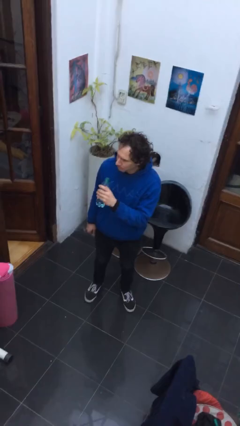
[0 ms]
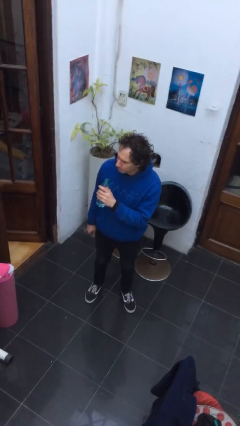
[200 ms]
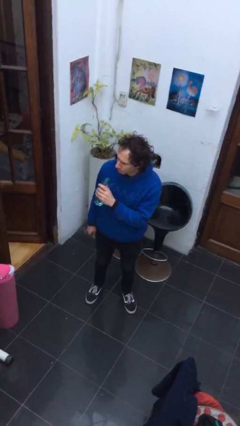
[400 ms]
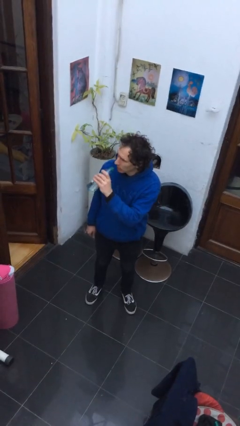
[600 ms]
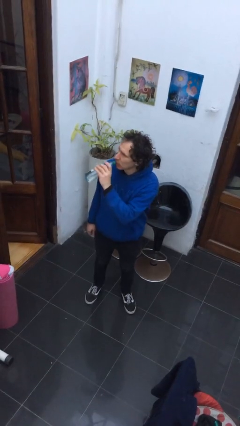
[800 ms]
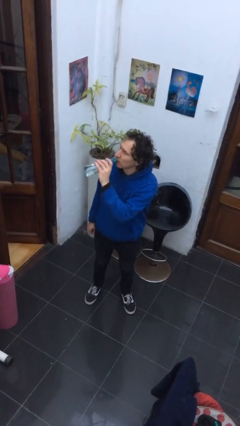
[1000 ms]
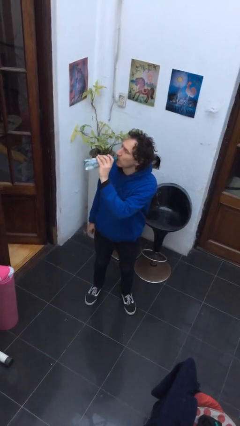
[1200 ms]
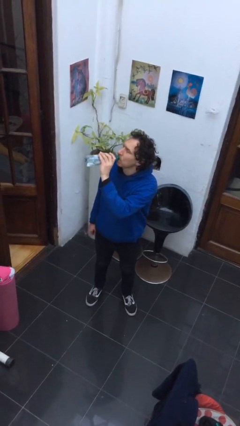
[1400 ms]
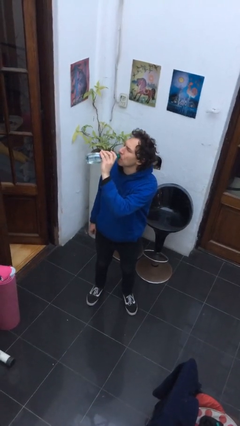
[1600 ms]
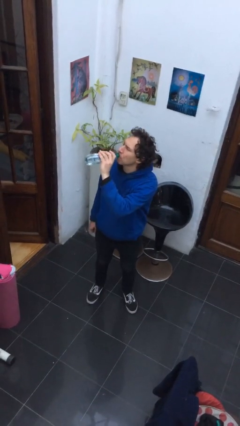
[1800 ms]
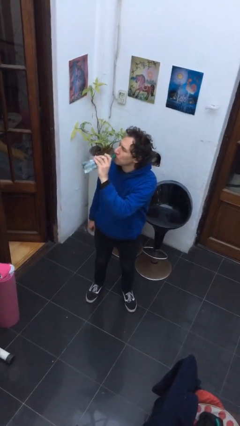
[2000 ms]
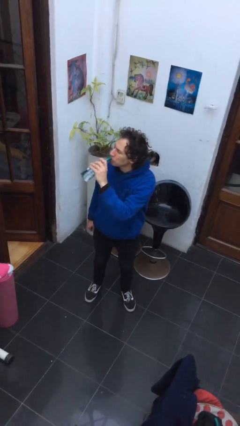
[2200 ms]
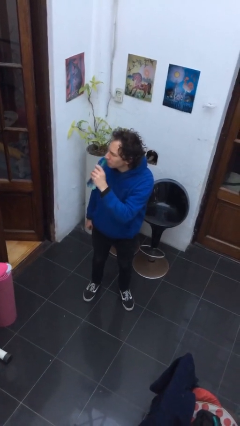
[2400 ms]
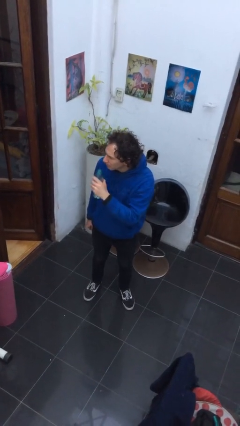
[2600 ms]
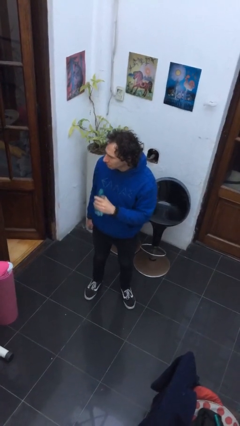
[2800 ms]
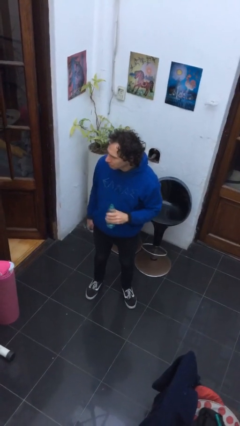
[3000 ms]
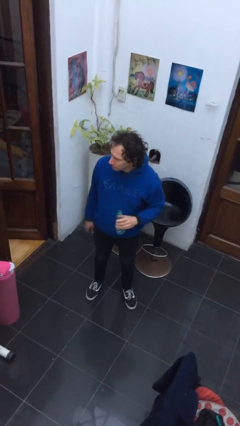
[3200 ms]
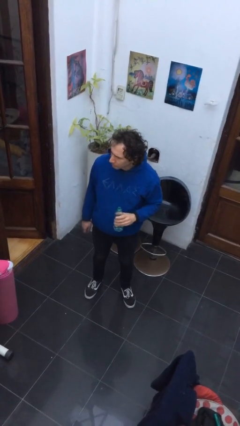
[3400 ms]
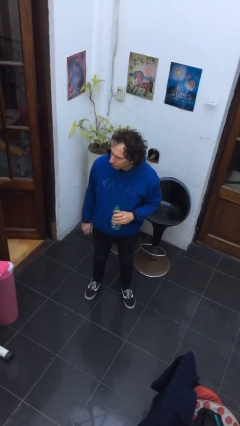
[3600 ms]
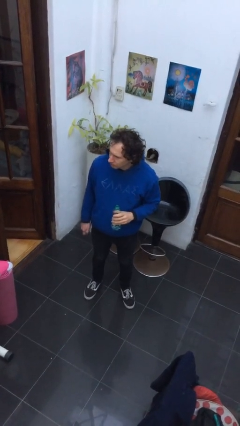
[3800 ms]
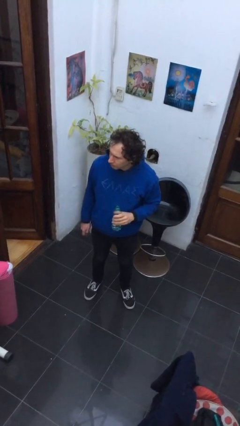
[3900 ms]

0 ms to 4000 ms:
person drinks from bottle

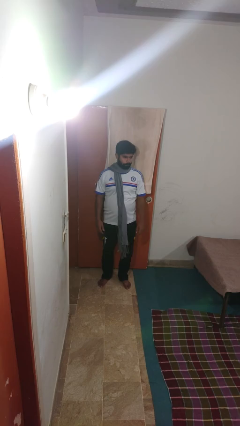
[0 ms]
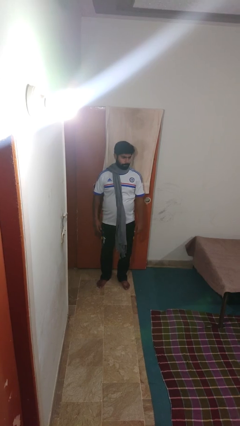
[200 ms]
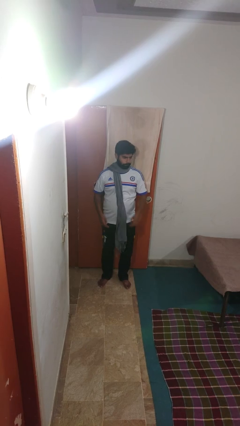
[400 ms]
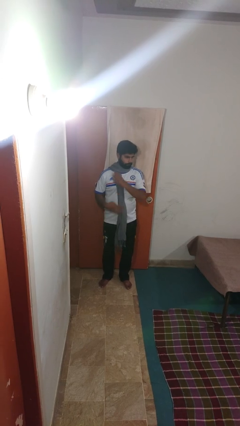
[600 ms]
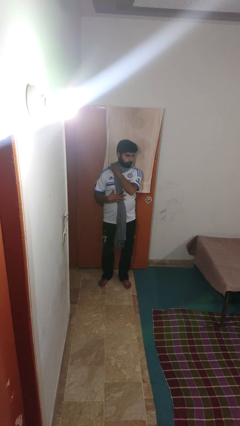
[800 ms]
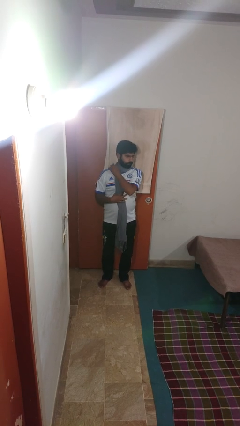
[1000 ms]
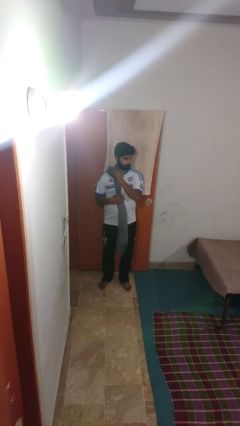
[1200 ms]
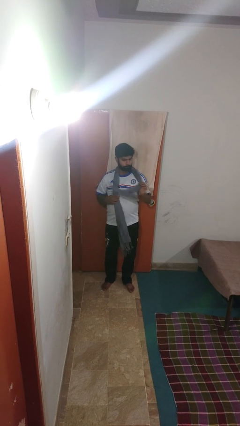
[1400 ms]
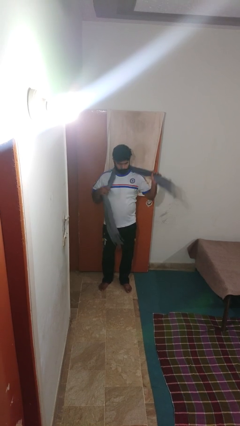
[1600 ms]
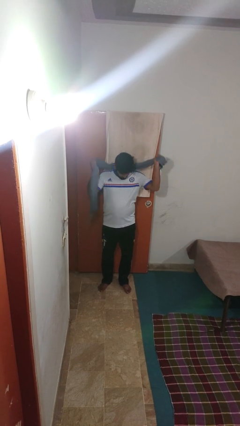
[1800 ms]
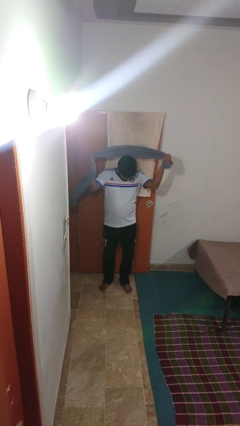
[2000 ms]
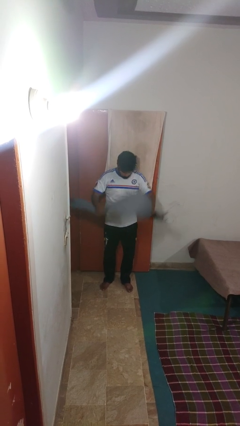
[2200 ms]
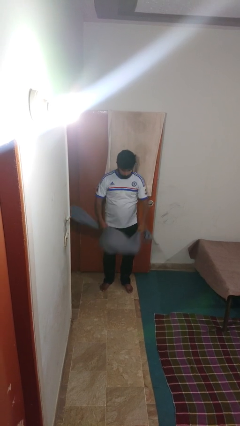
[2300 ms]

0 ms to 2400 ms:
person takes off scarf

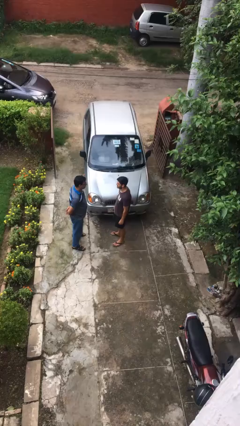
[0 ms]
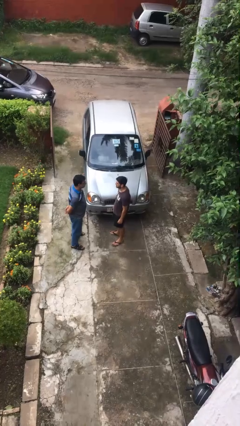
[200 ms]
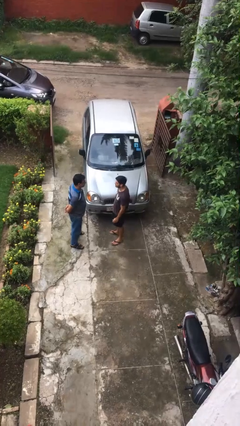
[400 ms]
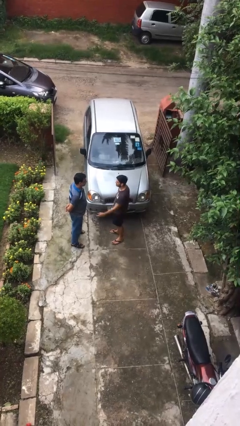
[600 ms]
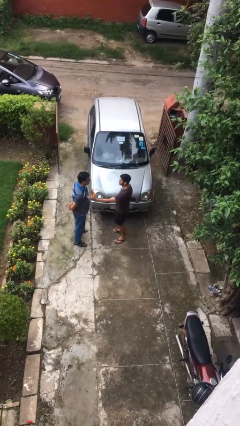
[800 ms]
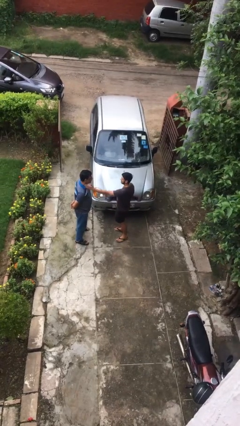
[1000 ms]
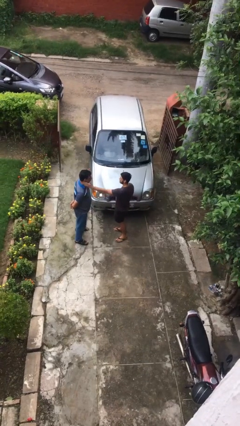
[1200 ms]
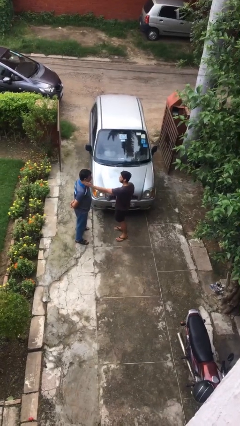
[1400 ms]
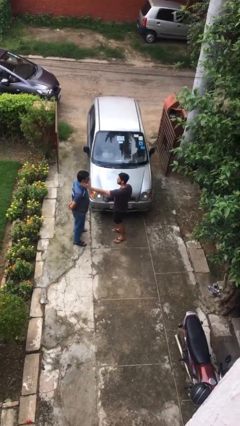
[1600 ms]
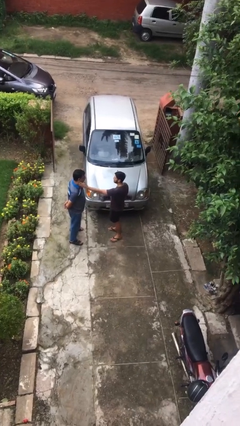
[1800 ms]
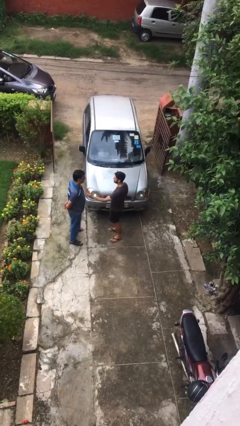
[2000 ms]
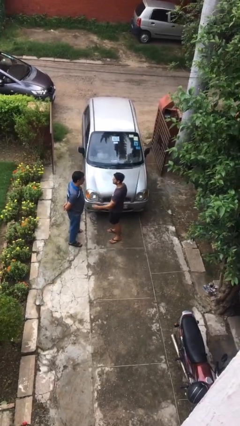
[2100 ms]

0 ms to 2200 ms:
person touches face of person

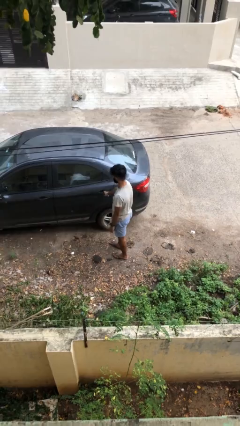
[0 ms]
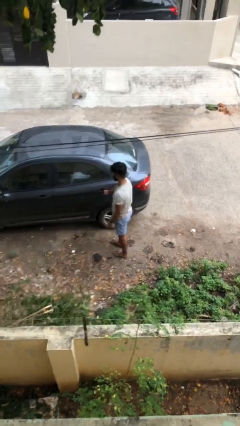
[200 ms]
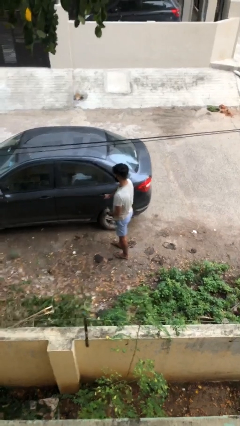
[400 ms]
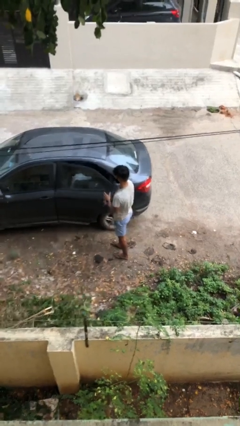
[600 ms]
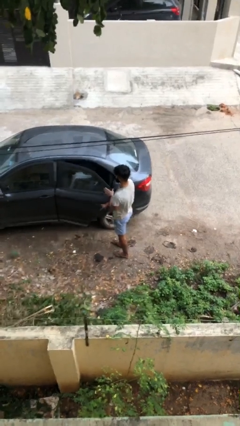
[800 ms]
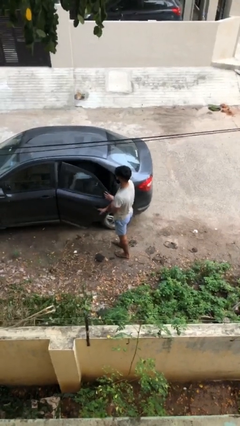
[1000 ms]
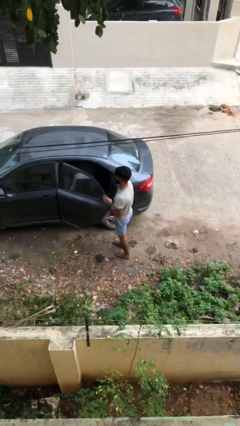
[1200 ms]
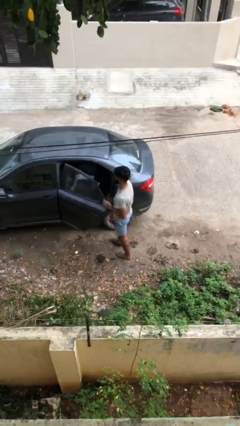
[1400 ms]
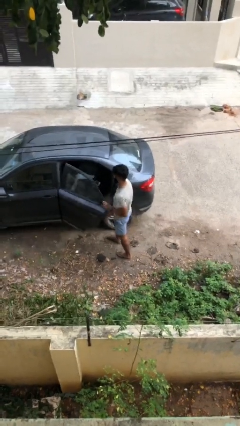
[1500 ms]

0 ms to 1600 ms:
person opens car door

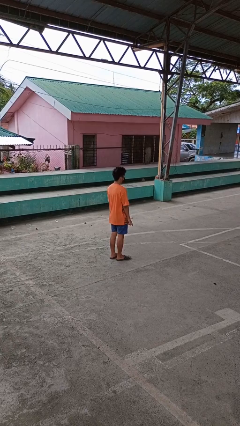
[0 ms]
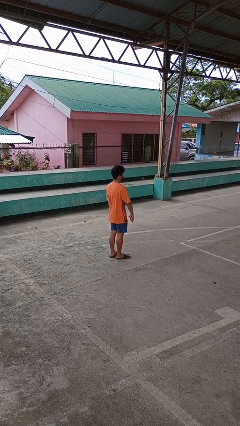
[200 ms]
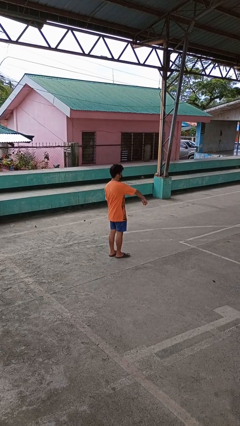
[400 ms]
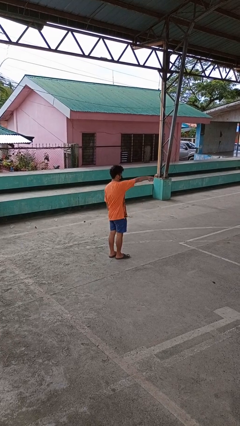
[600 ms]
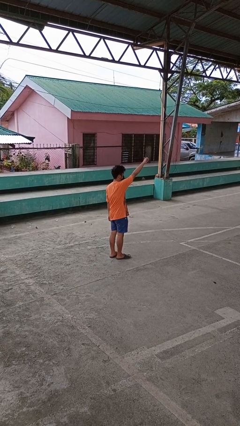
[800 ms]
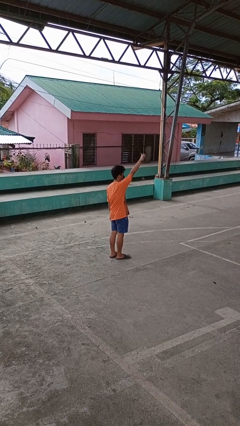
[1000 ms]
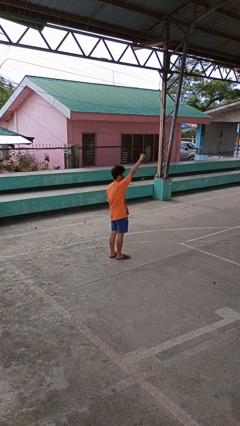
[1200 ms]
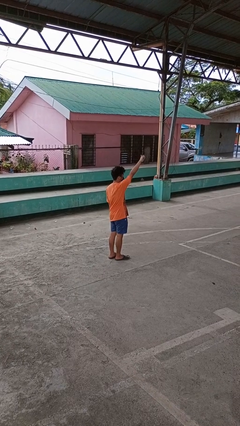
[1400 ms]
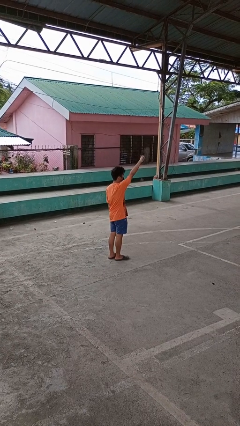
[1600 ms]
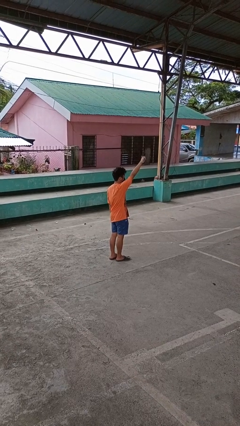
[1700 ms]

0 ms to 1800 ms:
person gestures swipe up

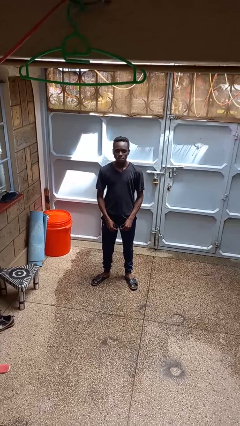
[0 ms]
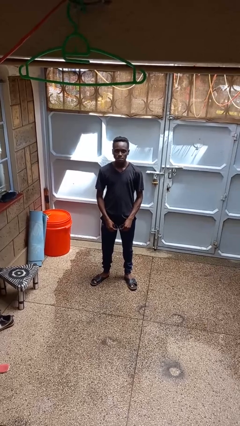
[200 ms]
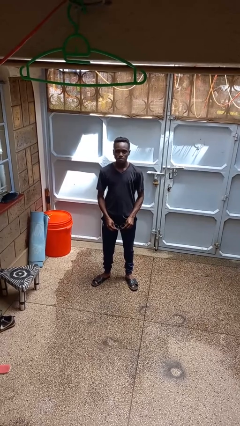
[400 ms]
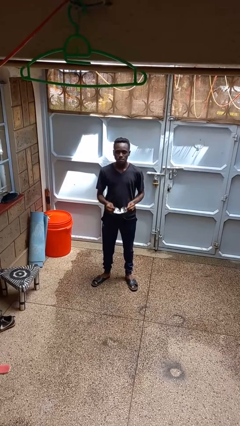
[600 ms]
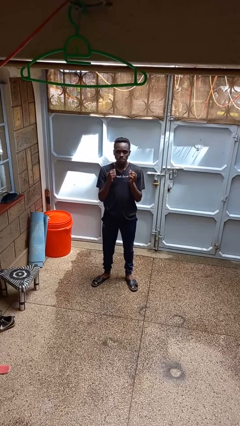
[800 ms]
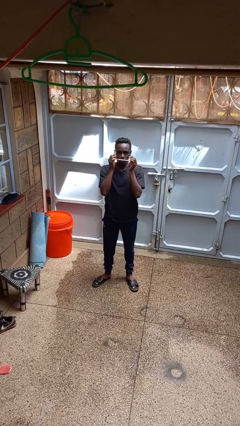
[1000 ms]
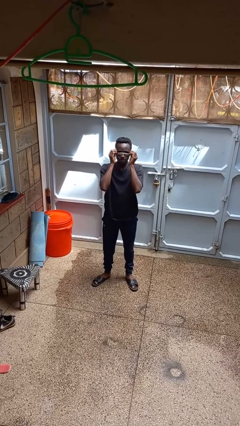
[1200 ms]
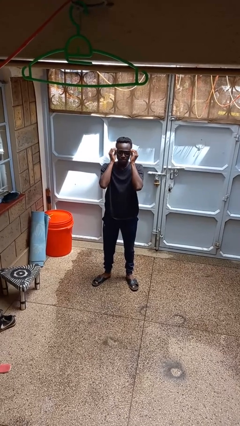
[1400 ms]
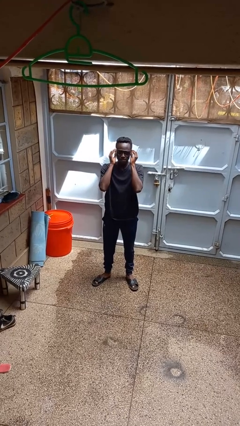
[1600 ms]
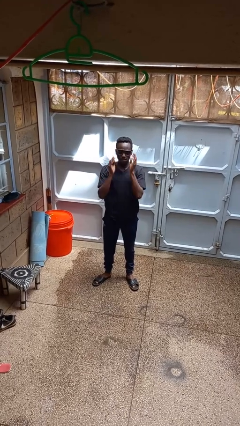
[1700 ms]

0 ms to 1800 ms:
person puts on sunglasses

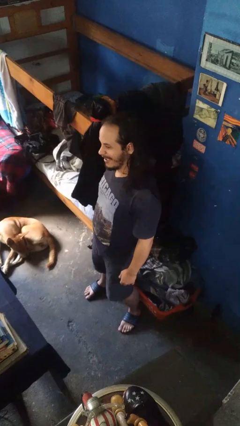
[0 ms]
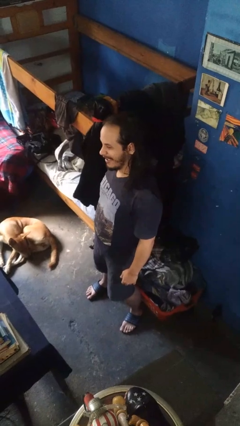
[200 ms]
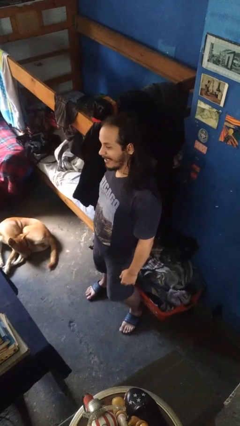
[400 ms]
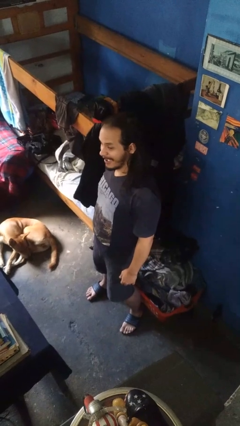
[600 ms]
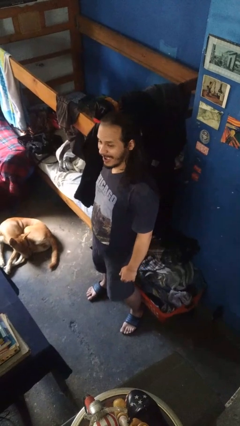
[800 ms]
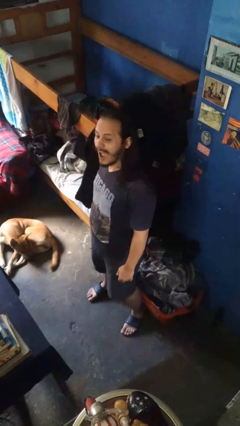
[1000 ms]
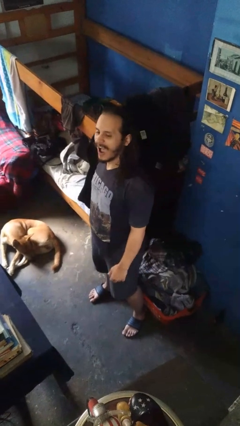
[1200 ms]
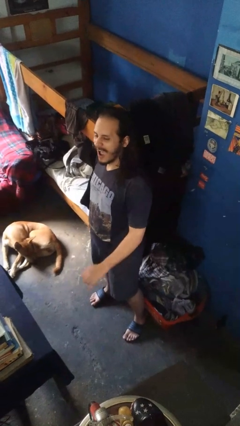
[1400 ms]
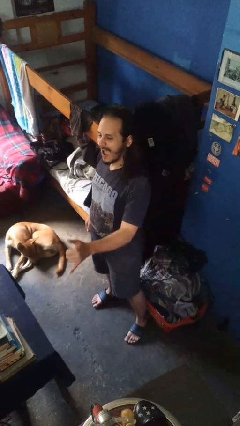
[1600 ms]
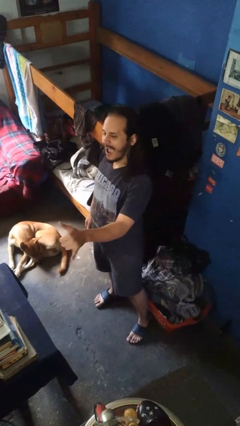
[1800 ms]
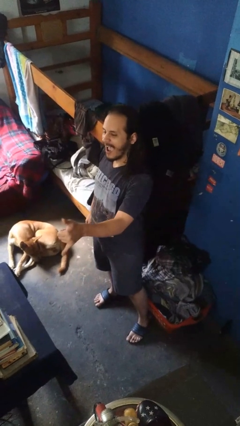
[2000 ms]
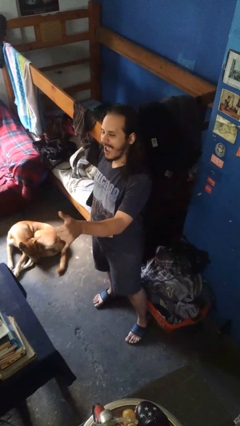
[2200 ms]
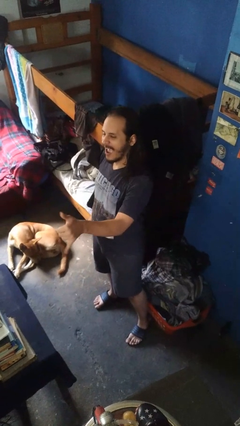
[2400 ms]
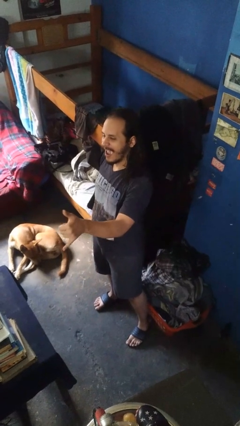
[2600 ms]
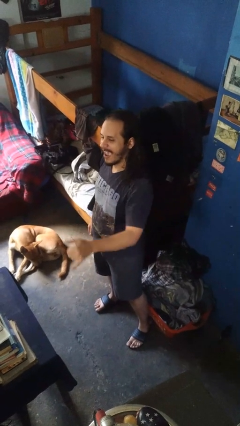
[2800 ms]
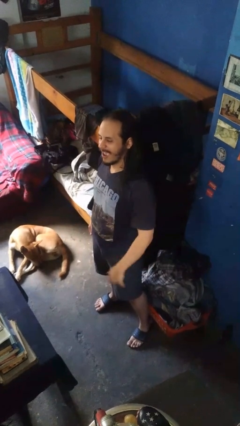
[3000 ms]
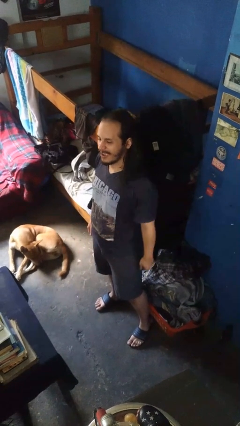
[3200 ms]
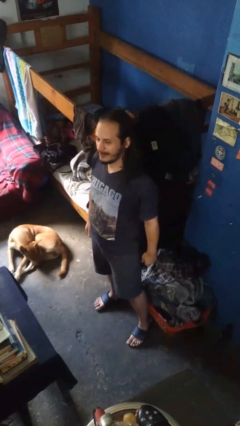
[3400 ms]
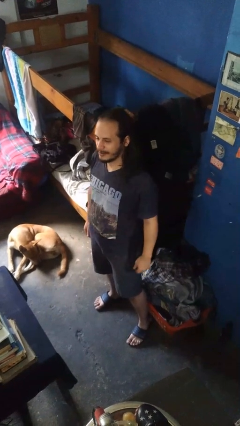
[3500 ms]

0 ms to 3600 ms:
person gestures hang loose
